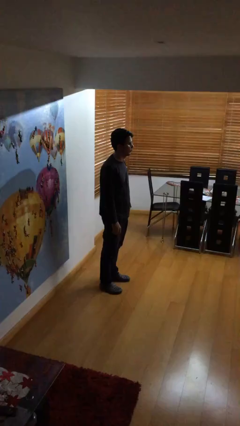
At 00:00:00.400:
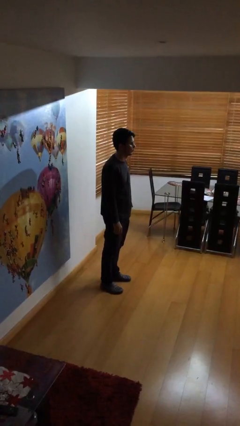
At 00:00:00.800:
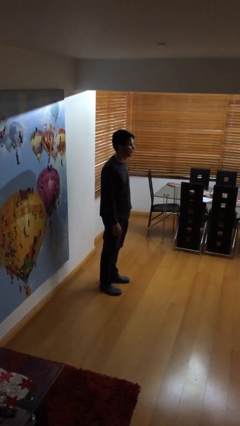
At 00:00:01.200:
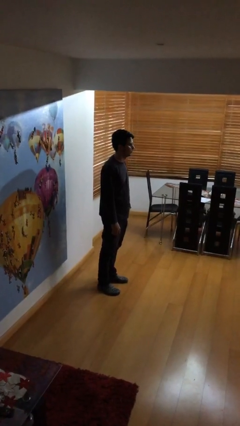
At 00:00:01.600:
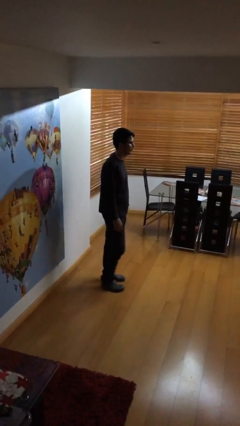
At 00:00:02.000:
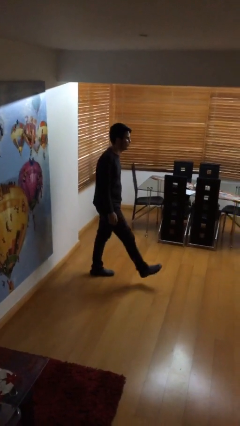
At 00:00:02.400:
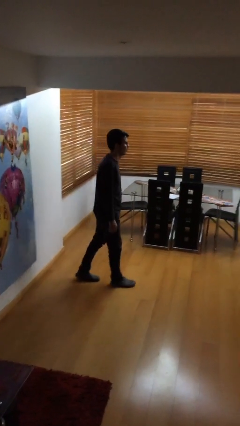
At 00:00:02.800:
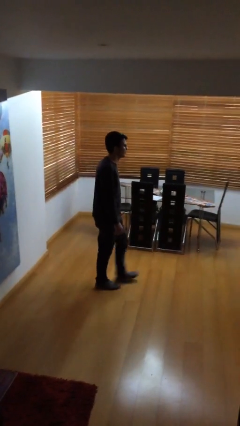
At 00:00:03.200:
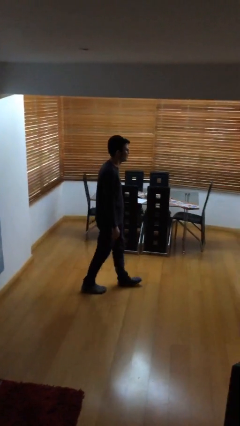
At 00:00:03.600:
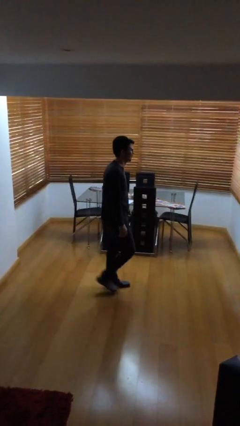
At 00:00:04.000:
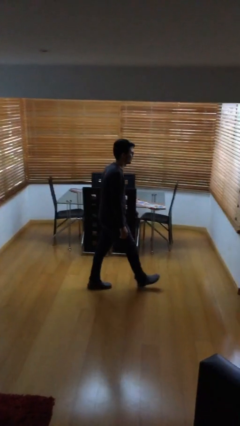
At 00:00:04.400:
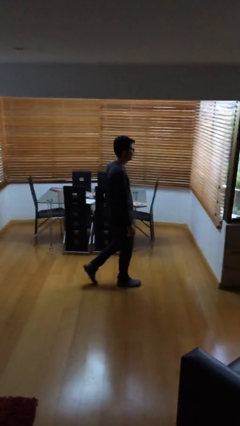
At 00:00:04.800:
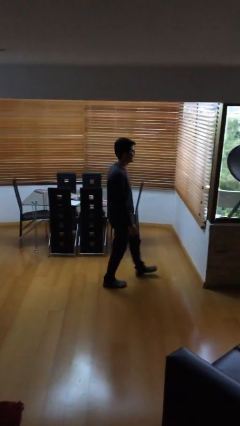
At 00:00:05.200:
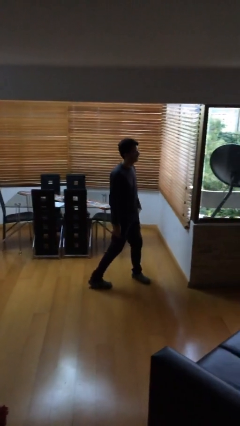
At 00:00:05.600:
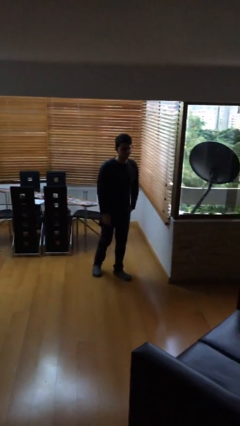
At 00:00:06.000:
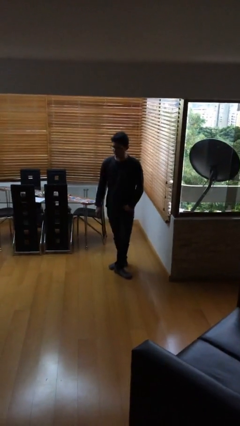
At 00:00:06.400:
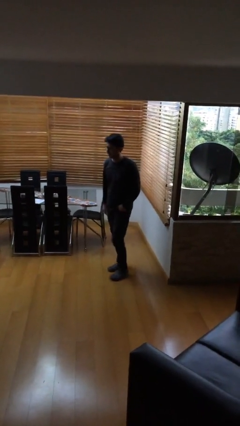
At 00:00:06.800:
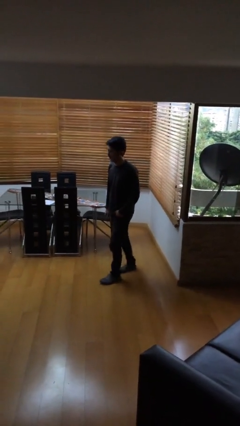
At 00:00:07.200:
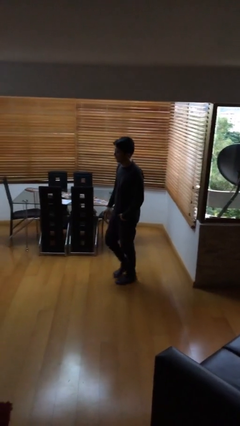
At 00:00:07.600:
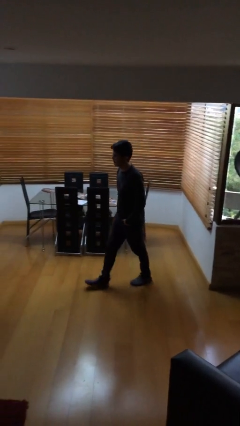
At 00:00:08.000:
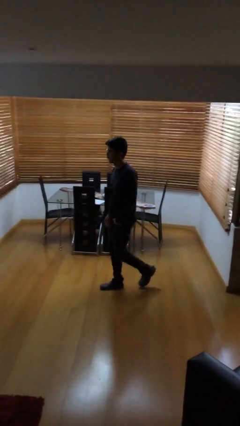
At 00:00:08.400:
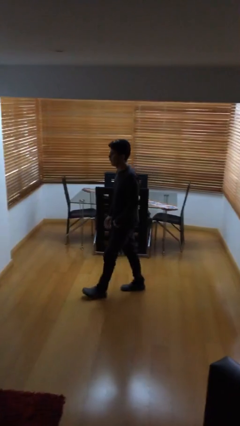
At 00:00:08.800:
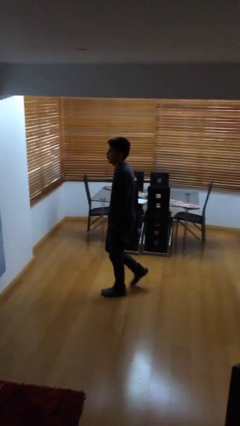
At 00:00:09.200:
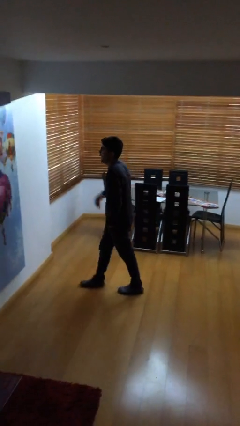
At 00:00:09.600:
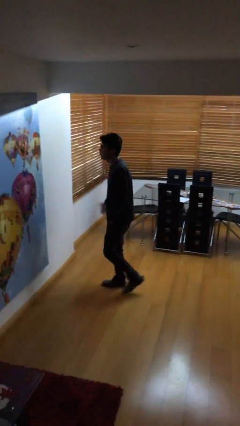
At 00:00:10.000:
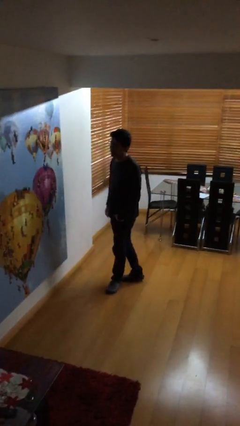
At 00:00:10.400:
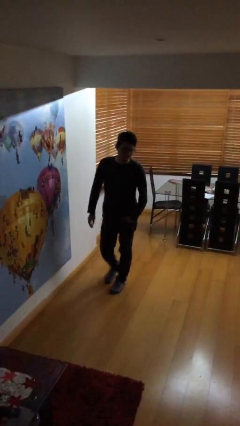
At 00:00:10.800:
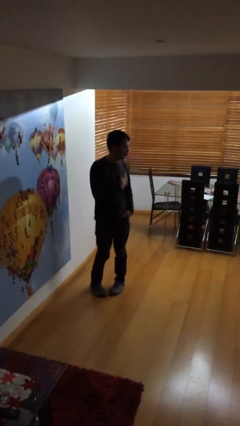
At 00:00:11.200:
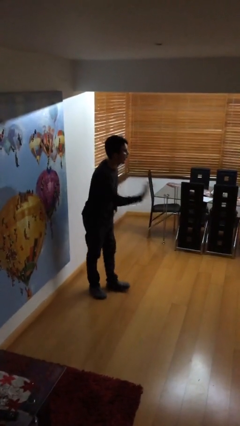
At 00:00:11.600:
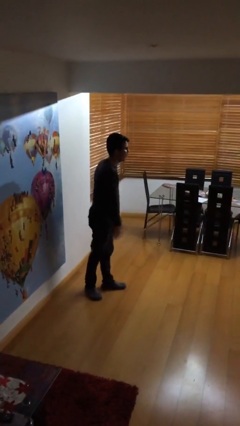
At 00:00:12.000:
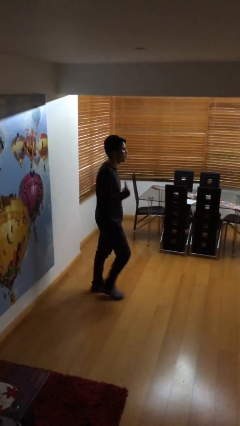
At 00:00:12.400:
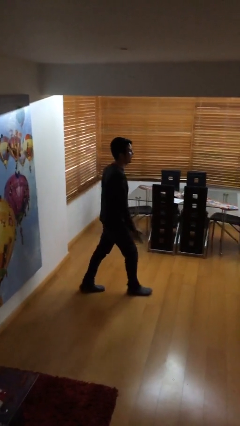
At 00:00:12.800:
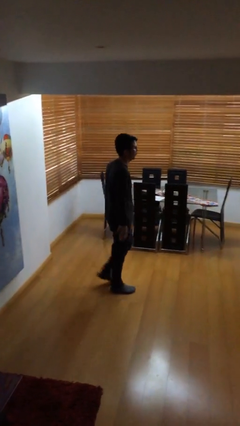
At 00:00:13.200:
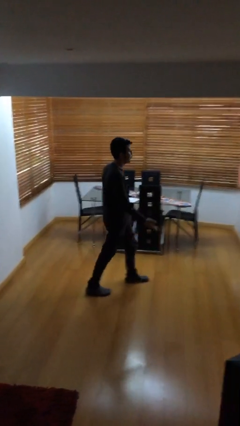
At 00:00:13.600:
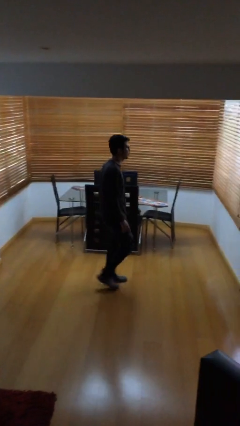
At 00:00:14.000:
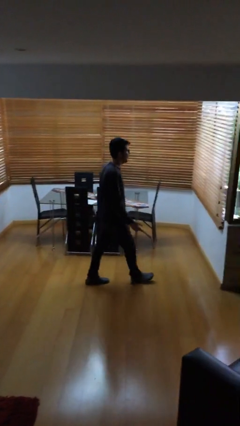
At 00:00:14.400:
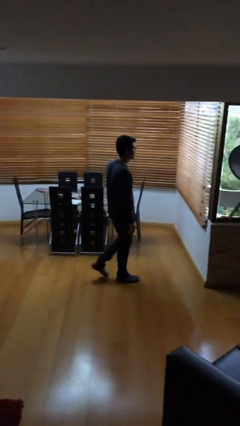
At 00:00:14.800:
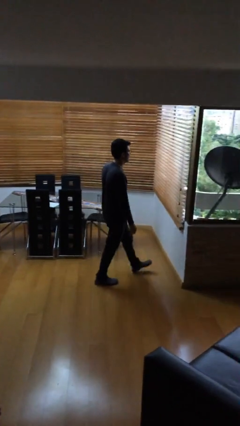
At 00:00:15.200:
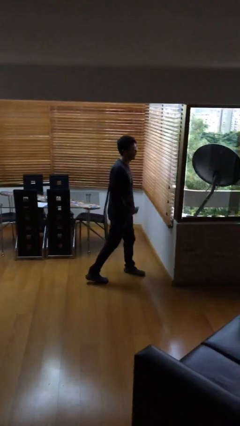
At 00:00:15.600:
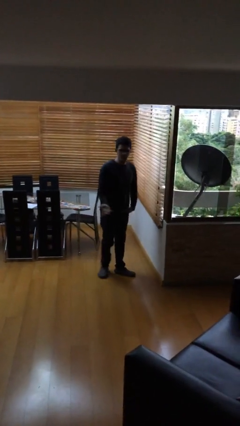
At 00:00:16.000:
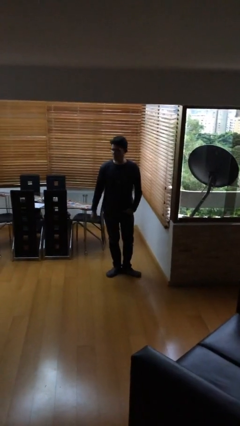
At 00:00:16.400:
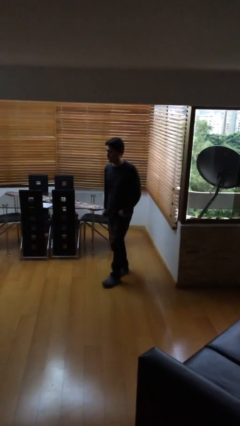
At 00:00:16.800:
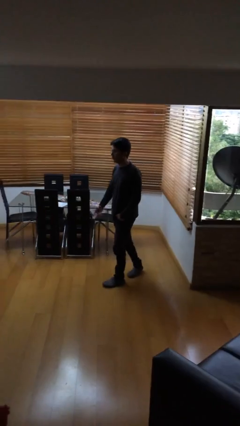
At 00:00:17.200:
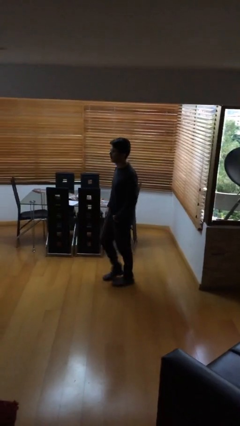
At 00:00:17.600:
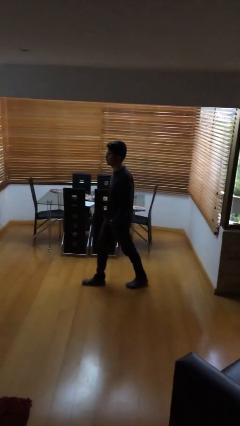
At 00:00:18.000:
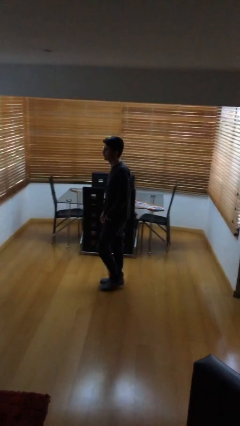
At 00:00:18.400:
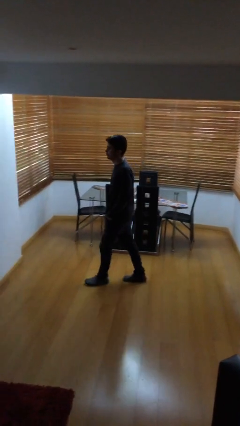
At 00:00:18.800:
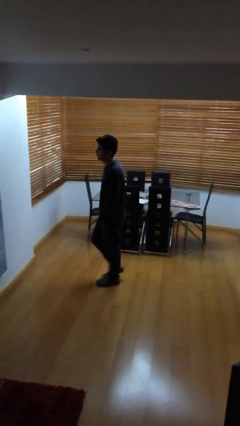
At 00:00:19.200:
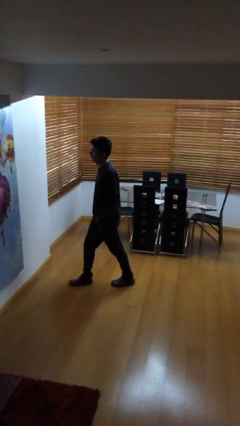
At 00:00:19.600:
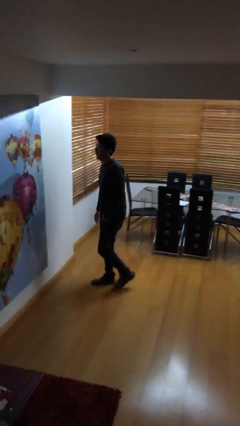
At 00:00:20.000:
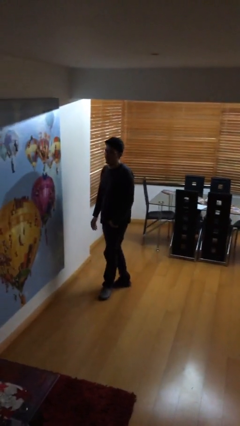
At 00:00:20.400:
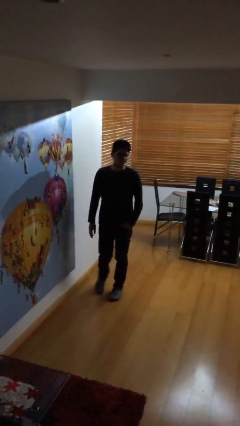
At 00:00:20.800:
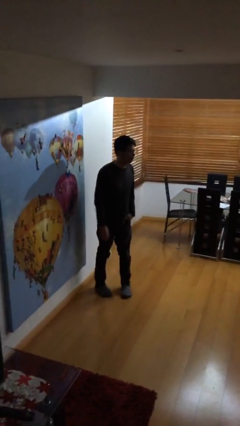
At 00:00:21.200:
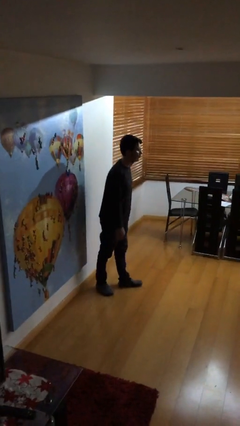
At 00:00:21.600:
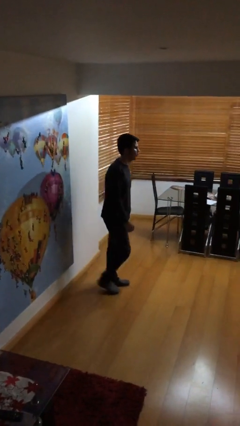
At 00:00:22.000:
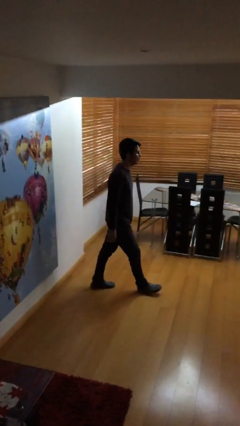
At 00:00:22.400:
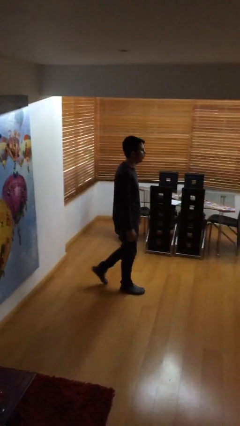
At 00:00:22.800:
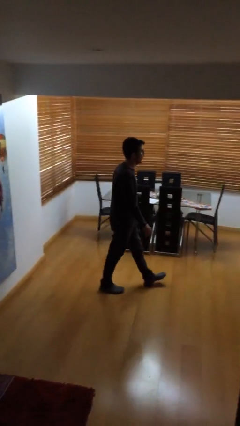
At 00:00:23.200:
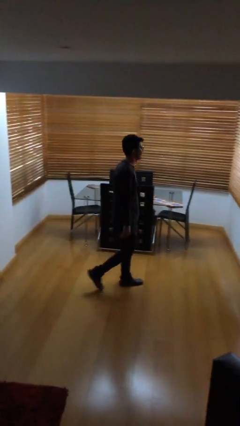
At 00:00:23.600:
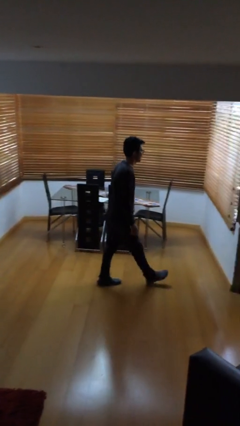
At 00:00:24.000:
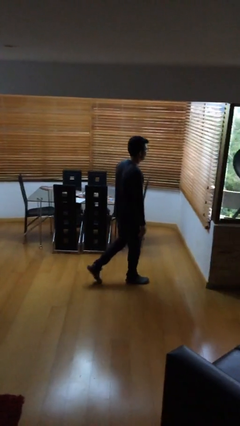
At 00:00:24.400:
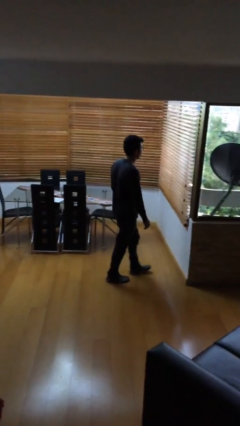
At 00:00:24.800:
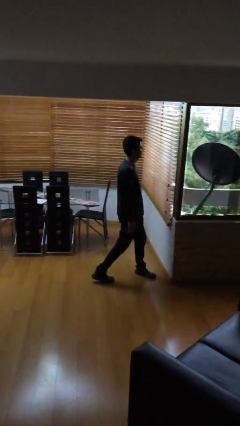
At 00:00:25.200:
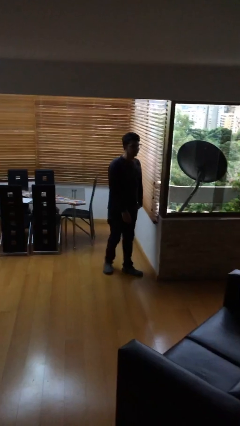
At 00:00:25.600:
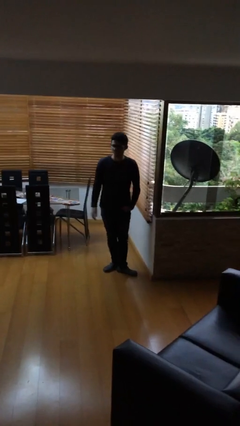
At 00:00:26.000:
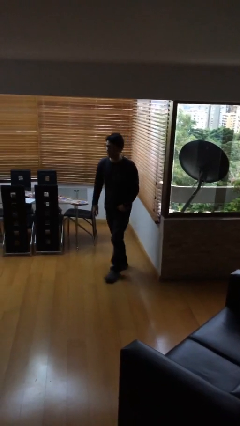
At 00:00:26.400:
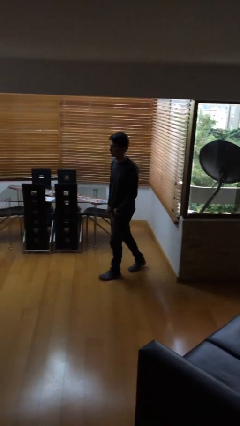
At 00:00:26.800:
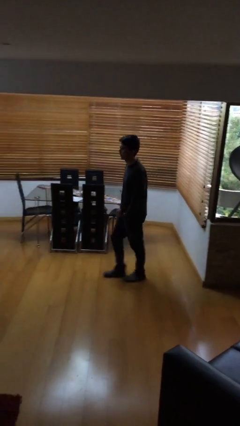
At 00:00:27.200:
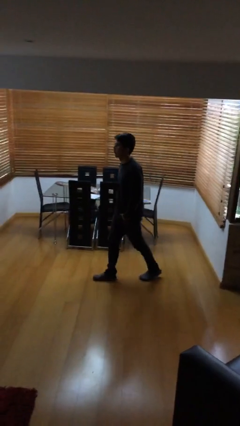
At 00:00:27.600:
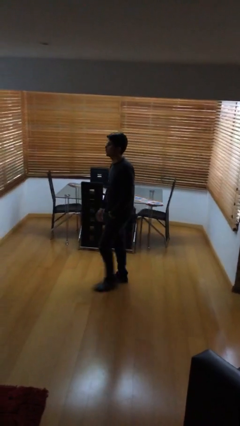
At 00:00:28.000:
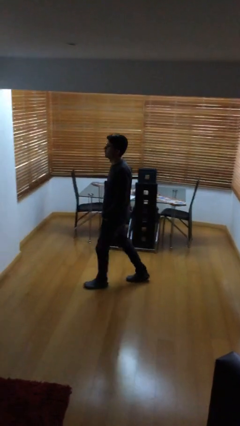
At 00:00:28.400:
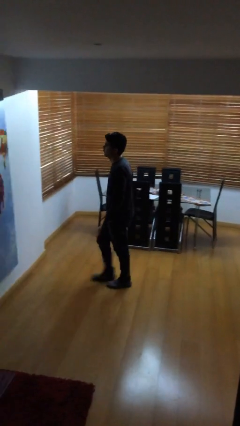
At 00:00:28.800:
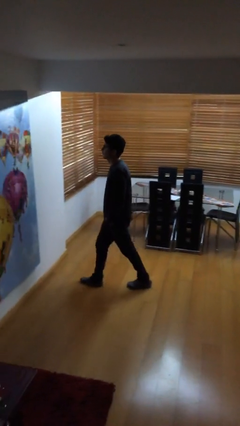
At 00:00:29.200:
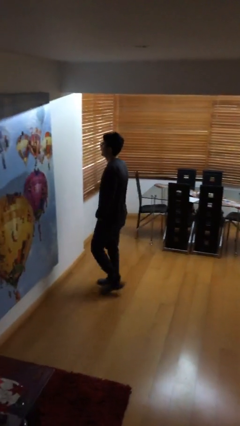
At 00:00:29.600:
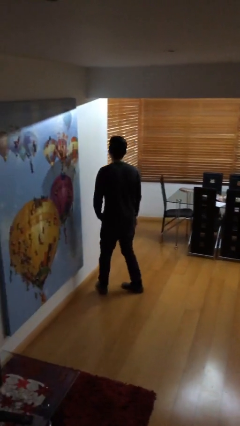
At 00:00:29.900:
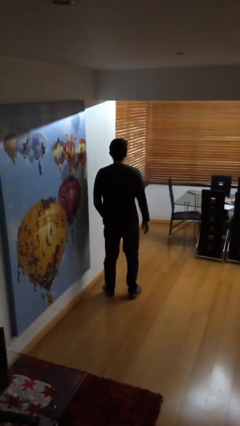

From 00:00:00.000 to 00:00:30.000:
person walks

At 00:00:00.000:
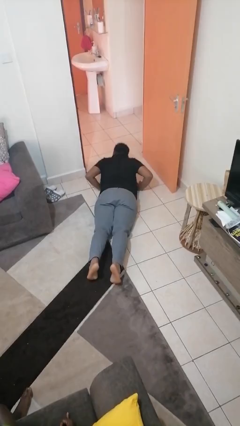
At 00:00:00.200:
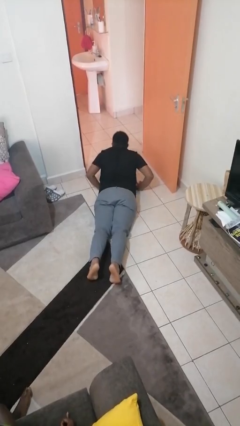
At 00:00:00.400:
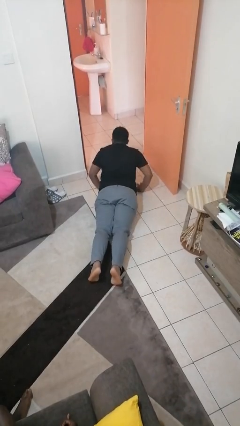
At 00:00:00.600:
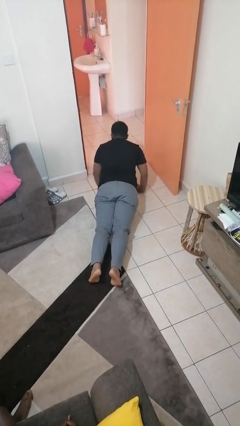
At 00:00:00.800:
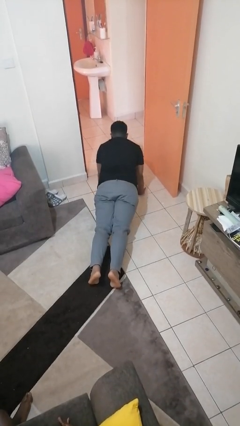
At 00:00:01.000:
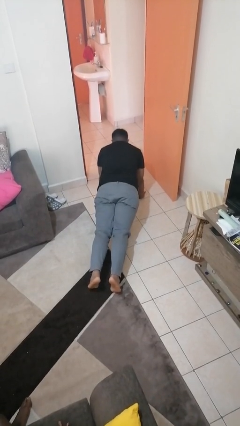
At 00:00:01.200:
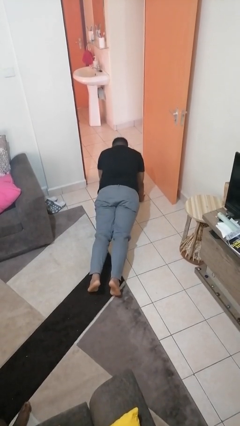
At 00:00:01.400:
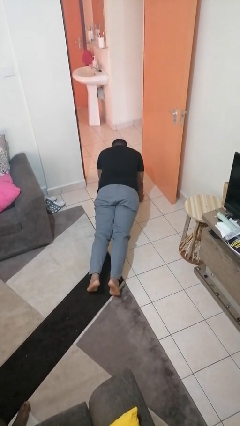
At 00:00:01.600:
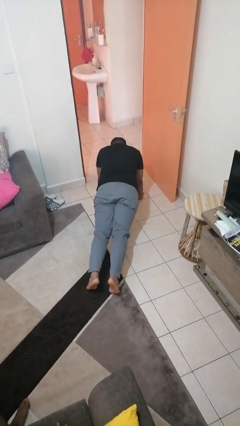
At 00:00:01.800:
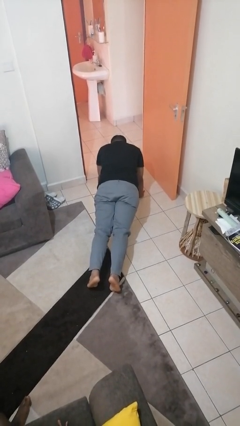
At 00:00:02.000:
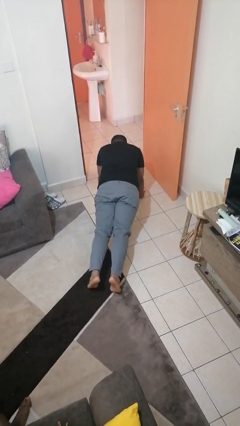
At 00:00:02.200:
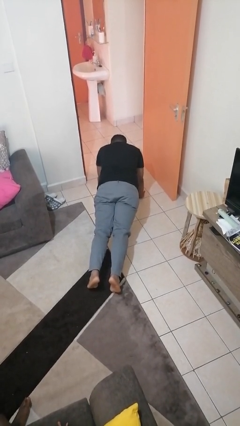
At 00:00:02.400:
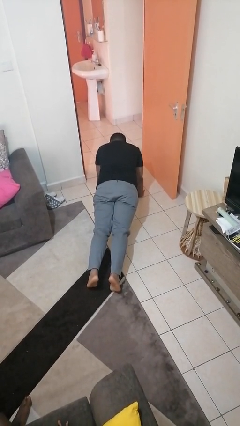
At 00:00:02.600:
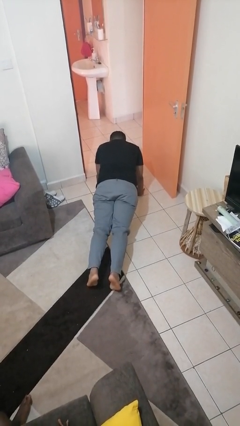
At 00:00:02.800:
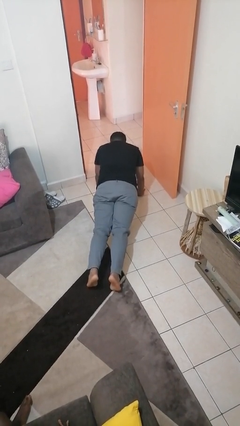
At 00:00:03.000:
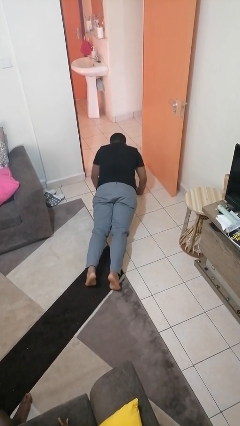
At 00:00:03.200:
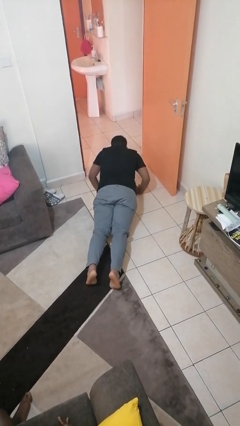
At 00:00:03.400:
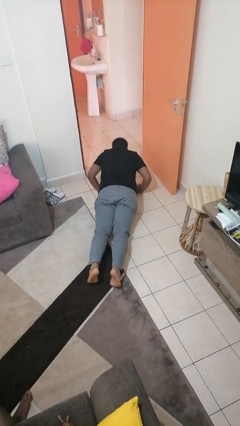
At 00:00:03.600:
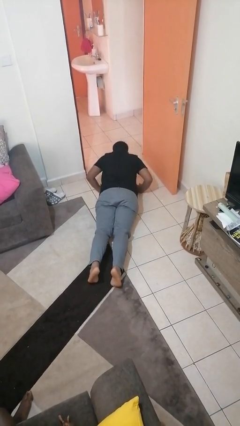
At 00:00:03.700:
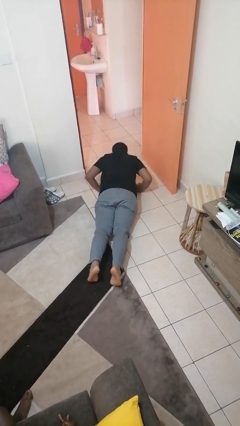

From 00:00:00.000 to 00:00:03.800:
person exercises with pushup
